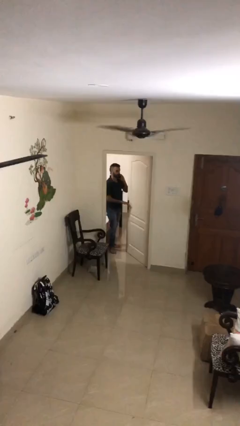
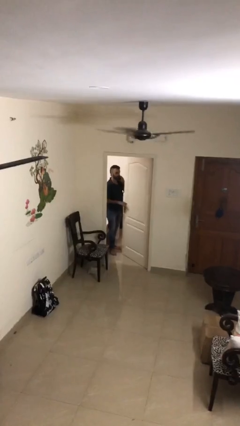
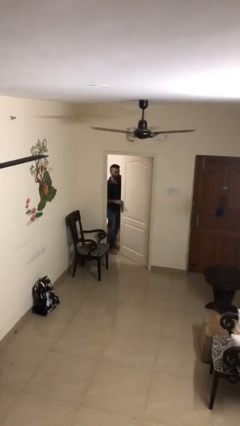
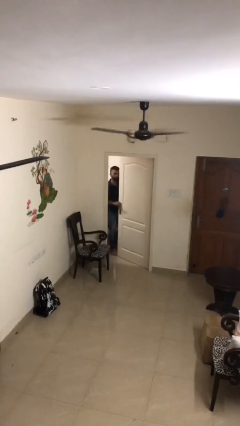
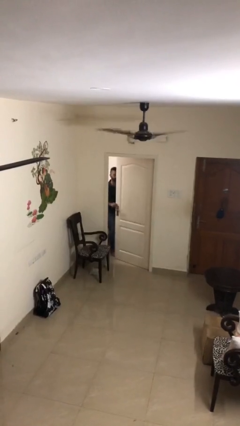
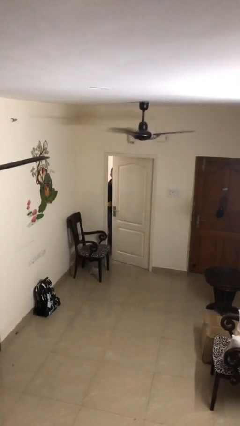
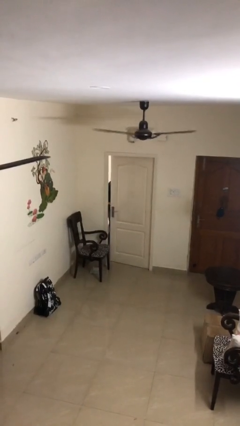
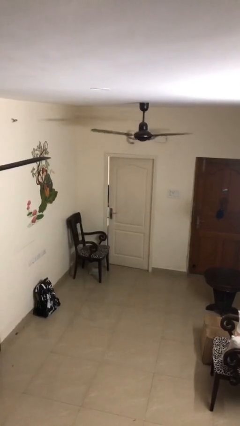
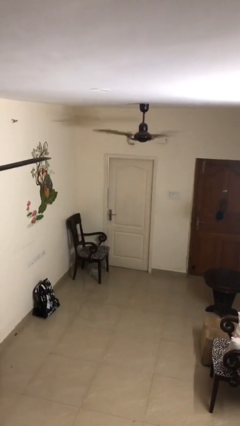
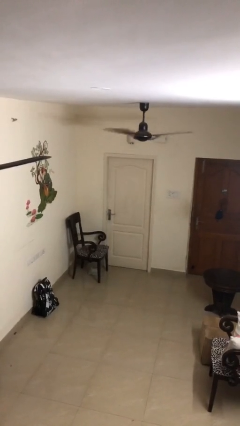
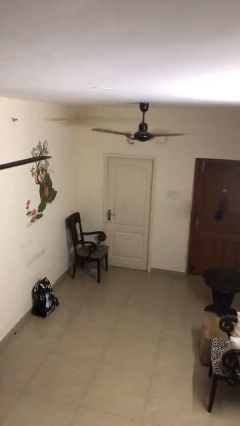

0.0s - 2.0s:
person closes facility door

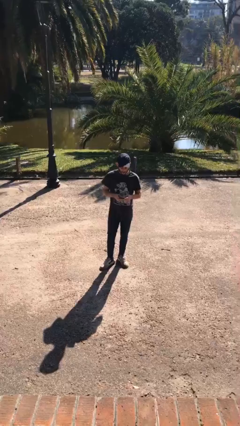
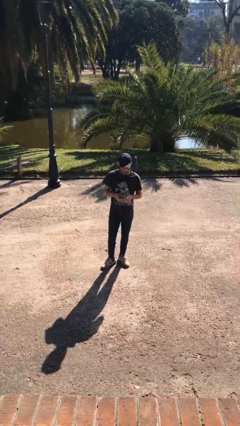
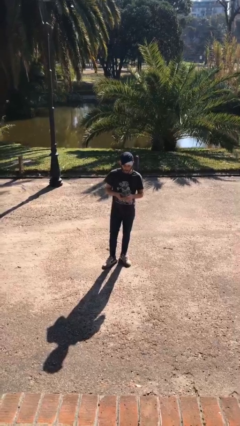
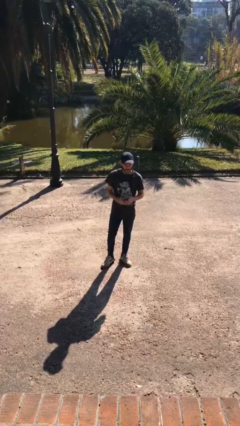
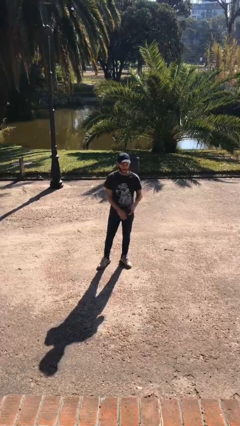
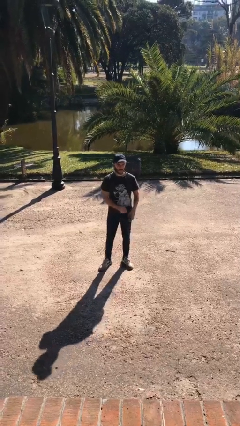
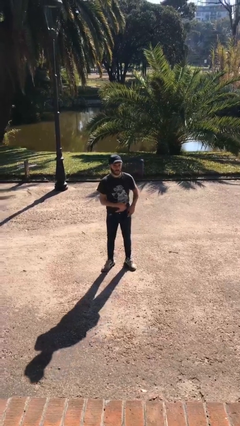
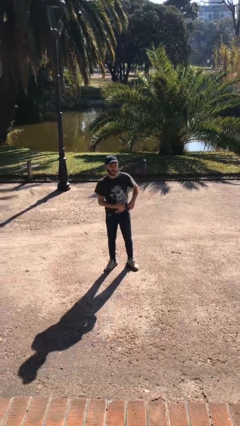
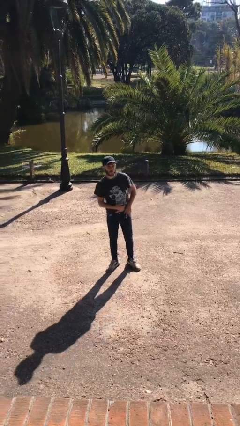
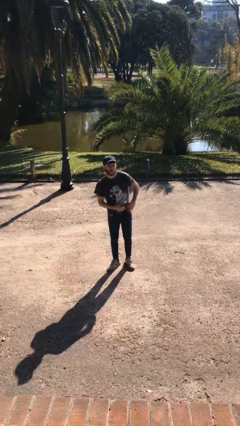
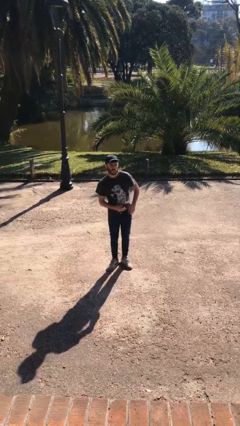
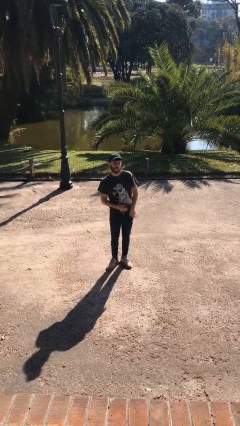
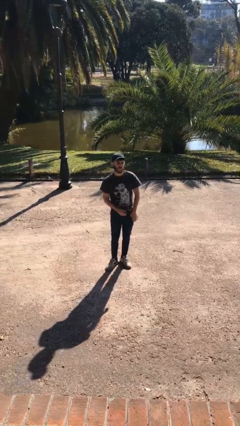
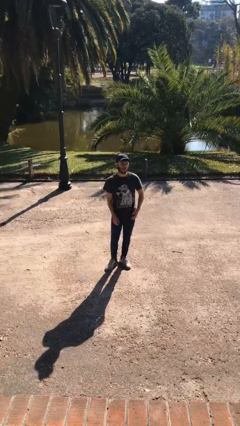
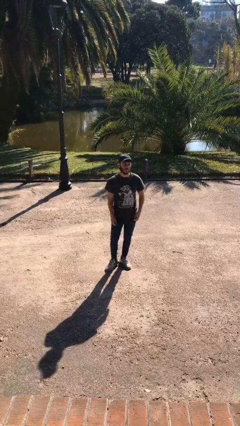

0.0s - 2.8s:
person puts phone into pocket

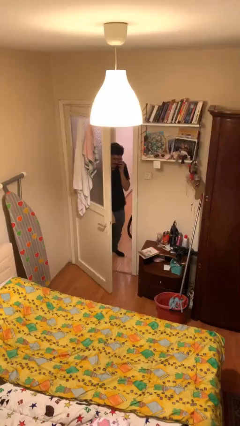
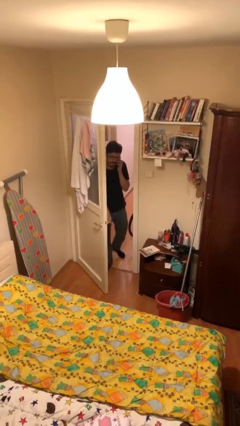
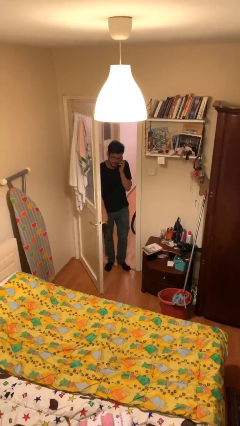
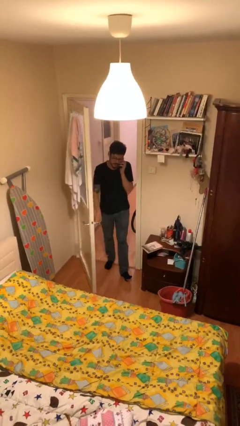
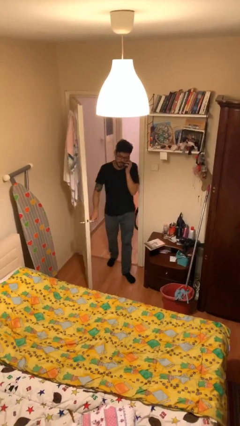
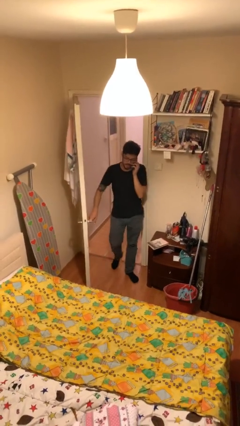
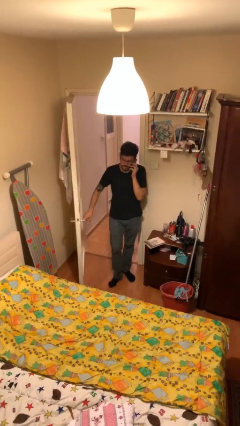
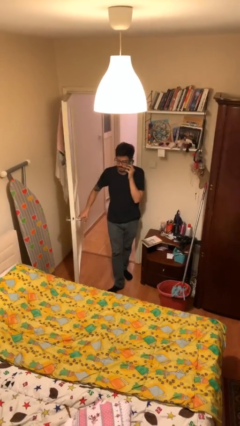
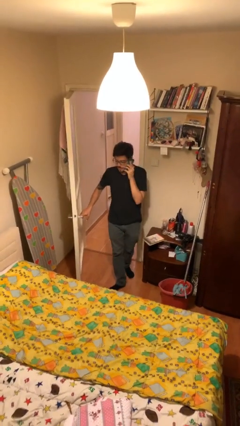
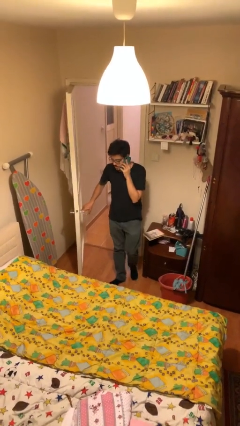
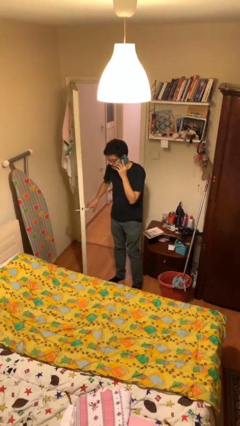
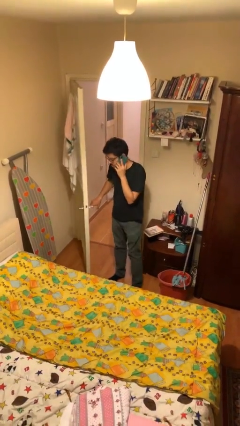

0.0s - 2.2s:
person enters scene through structure

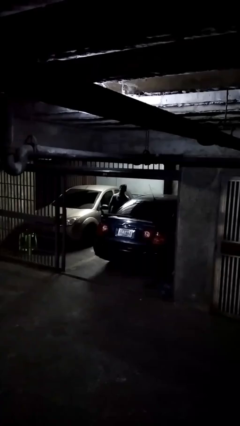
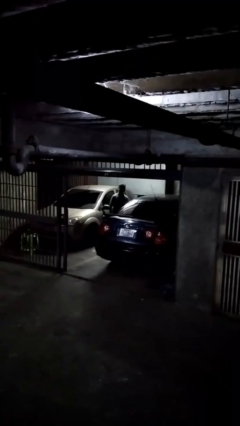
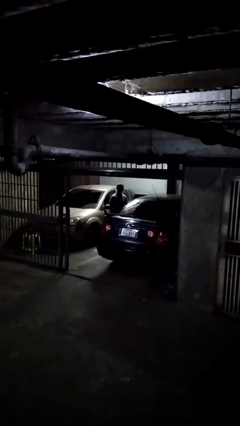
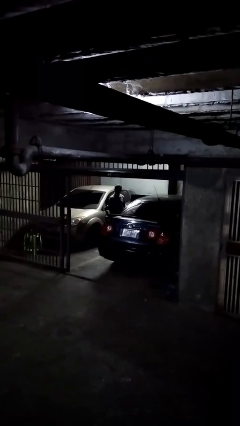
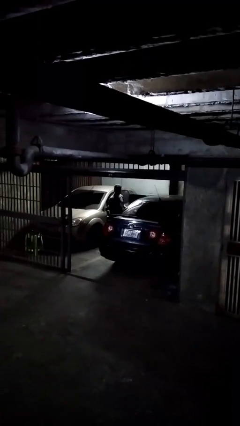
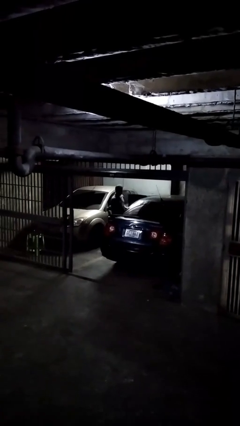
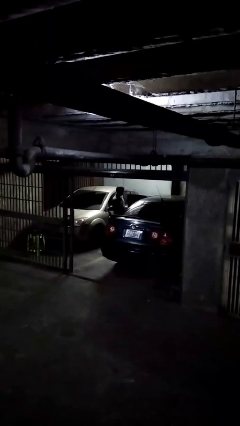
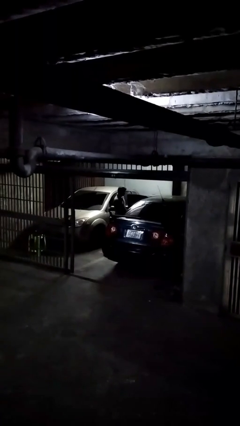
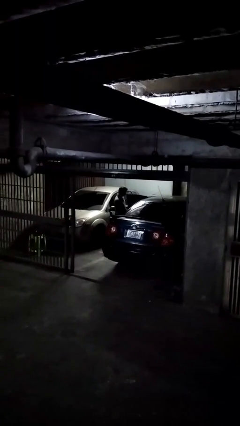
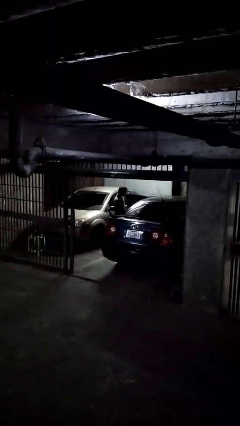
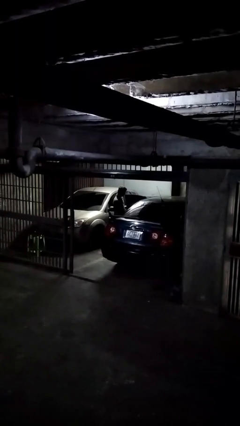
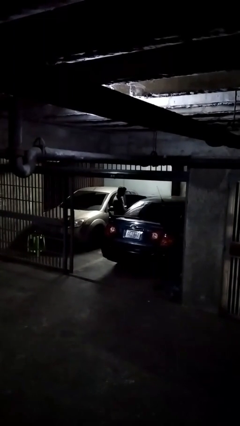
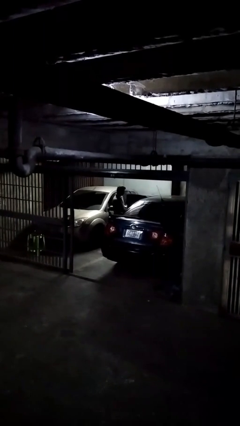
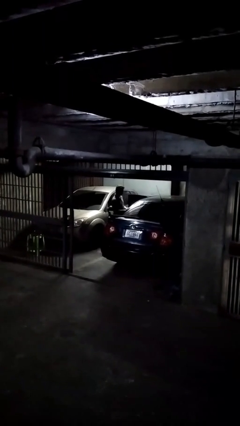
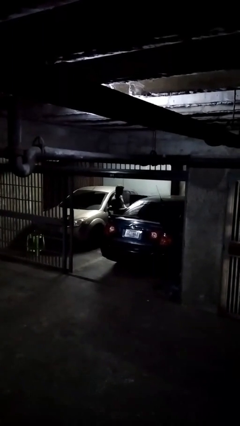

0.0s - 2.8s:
person opens car door

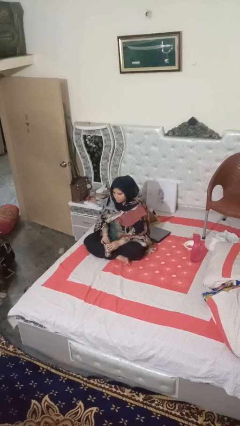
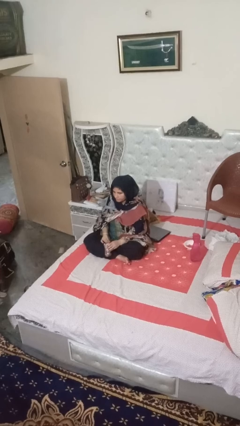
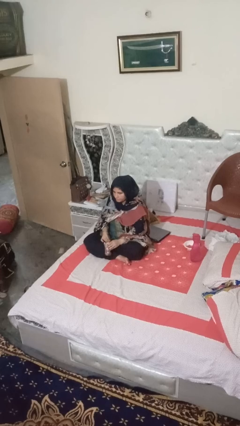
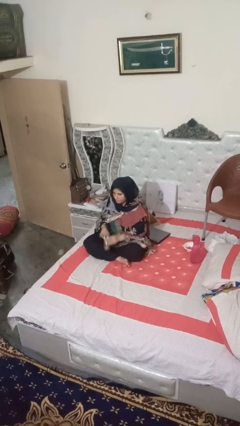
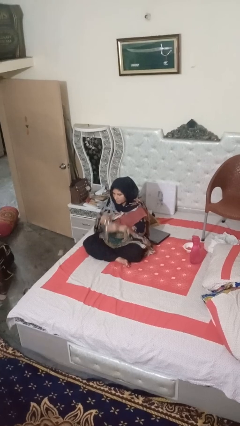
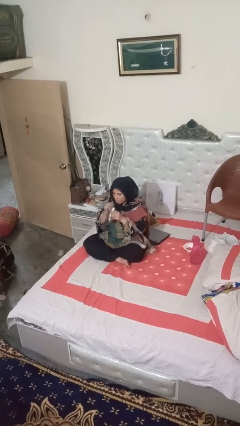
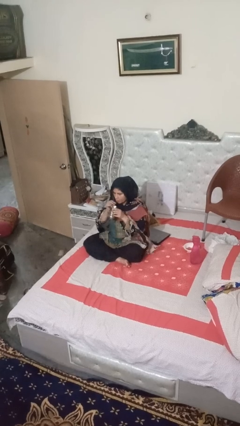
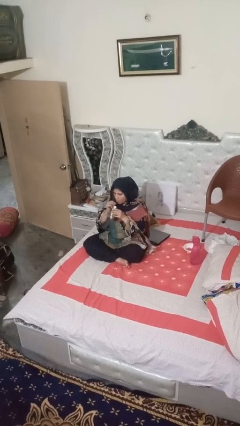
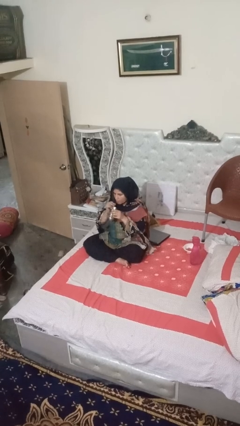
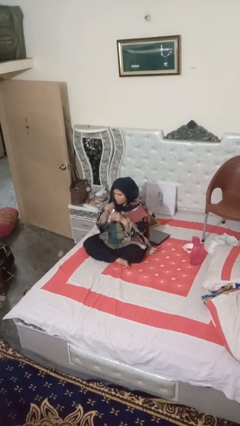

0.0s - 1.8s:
person drinks from straw

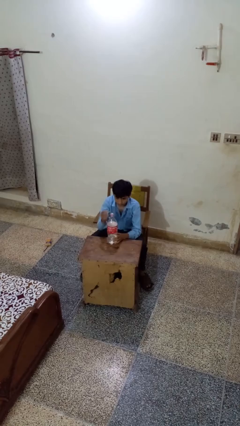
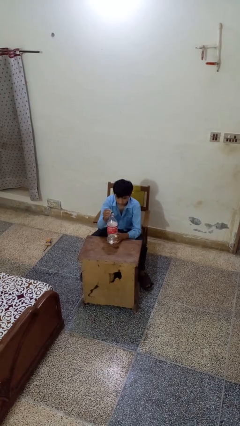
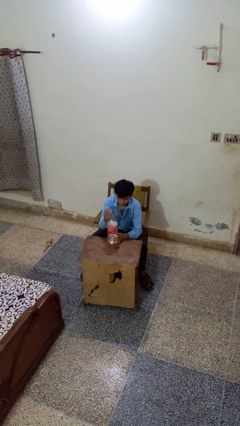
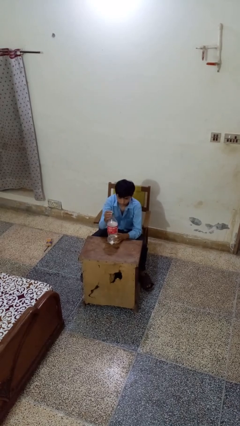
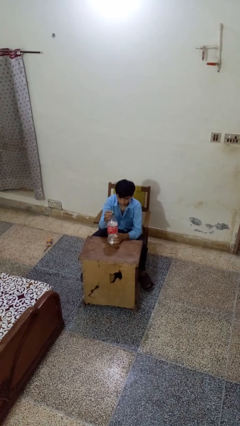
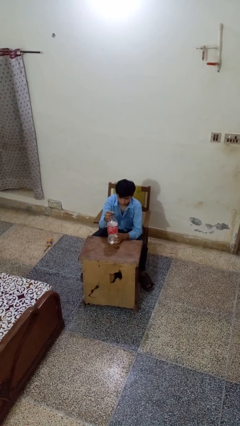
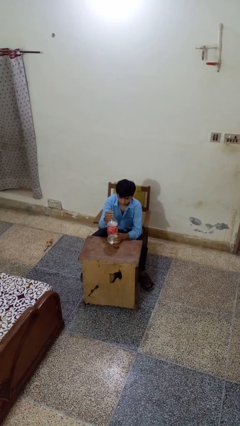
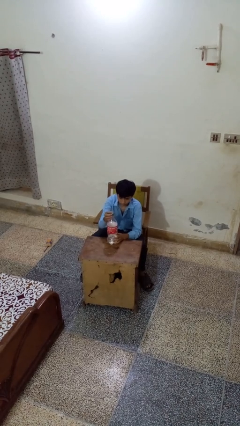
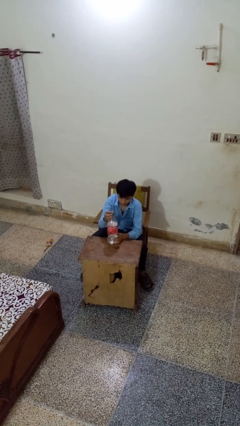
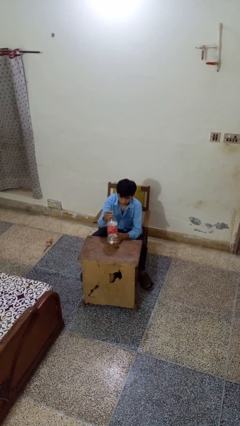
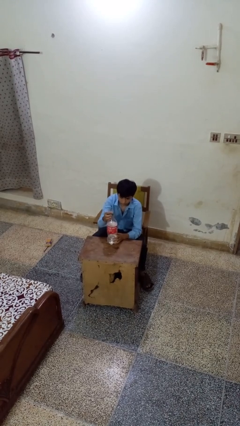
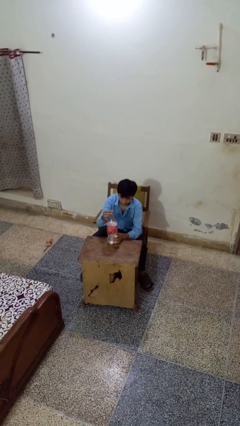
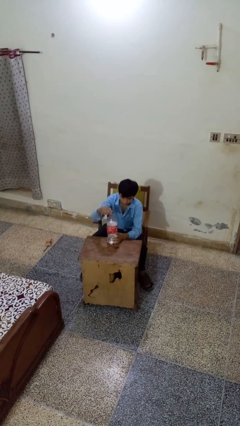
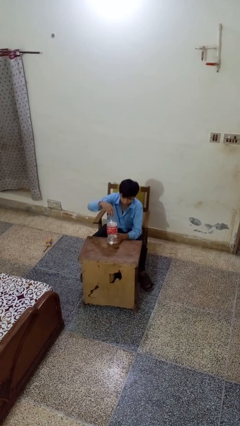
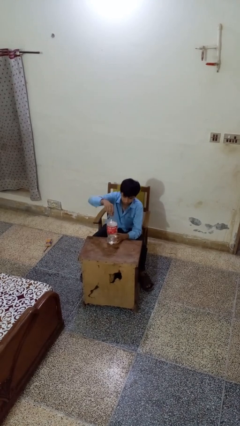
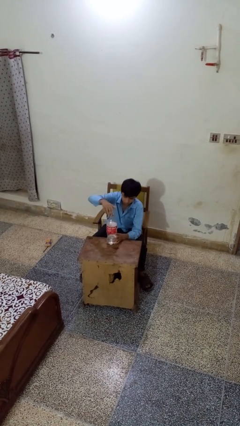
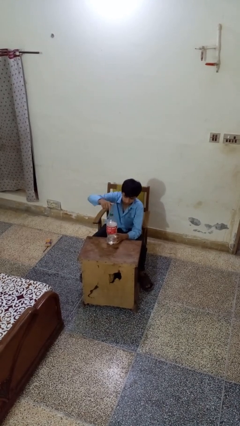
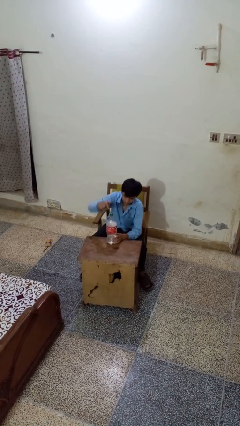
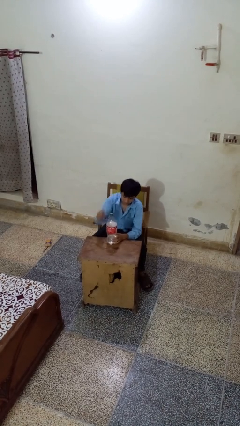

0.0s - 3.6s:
person screws lid to bottle

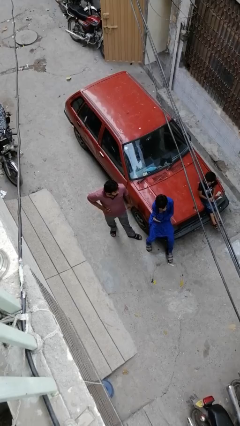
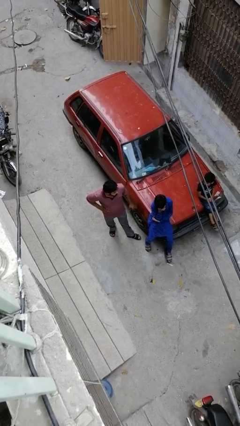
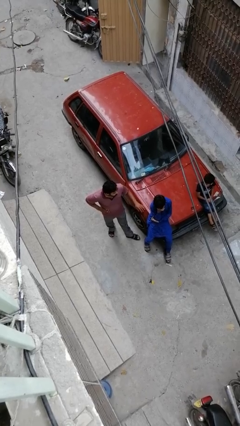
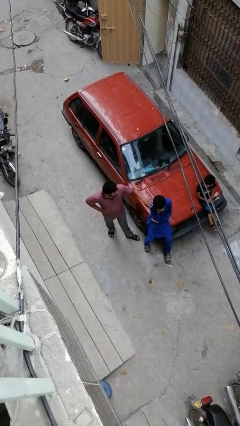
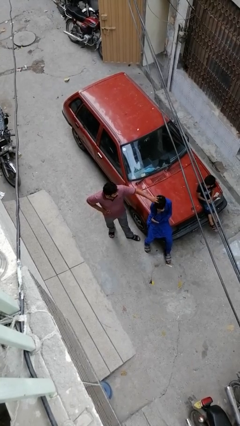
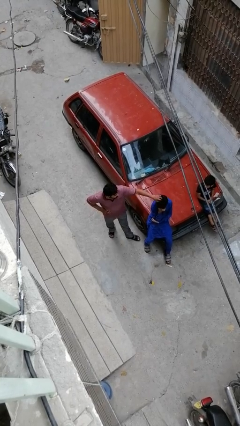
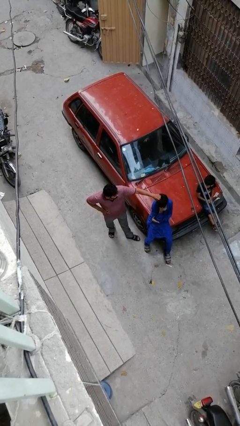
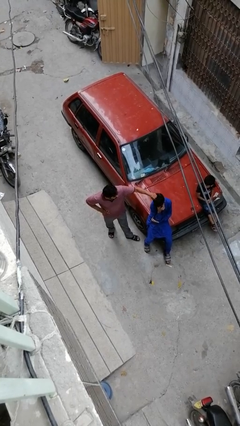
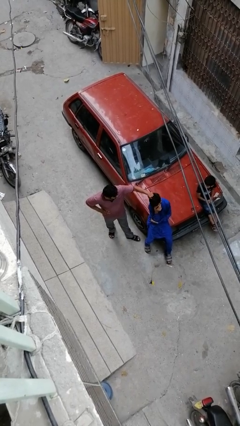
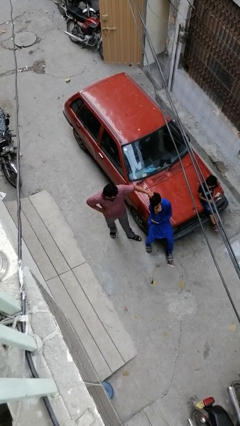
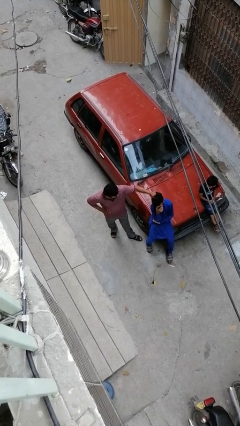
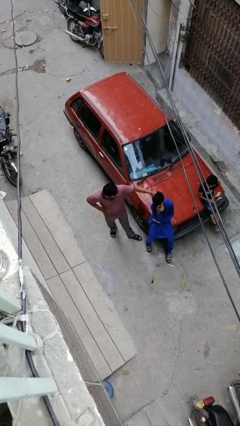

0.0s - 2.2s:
person grabs person by hair
